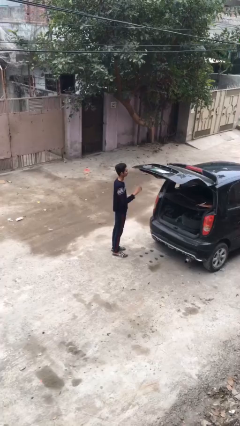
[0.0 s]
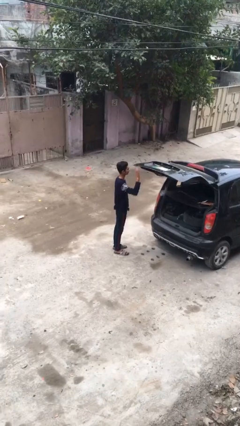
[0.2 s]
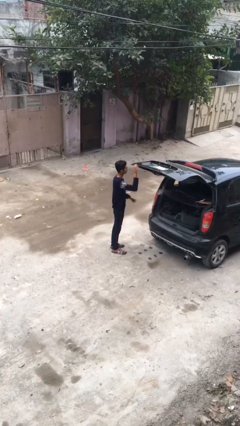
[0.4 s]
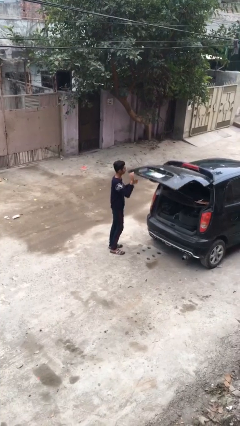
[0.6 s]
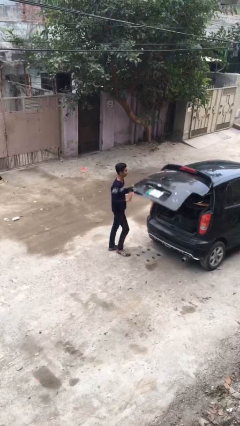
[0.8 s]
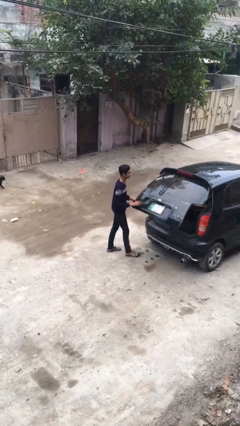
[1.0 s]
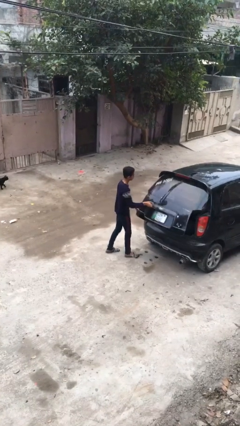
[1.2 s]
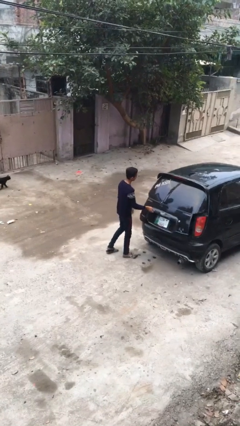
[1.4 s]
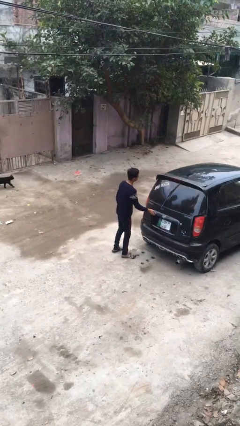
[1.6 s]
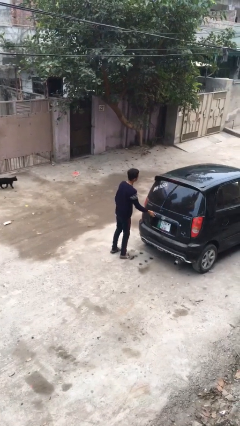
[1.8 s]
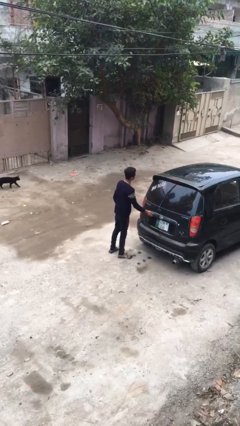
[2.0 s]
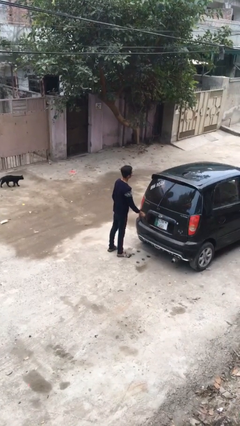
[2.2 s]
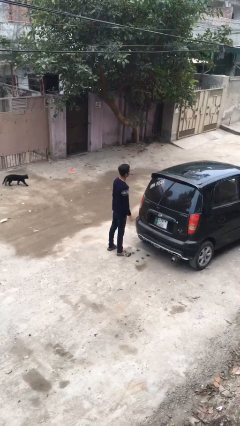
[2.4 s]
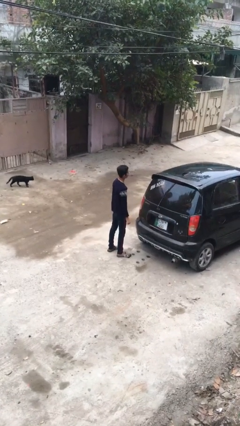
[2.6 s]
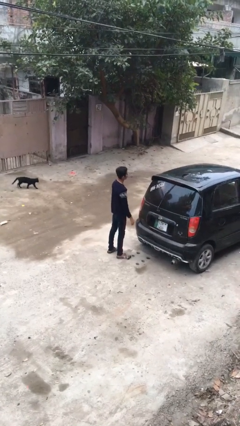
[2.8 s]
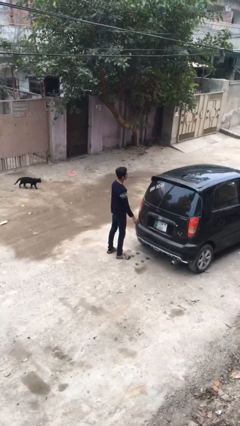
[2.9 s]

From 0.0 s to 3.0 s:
person closes car trunk

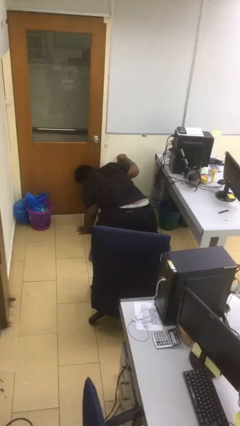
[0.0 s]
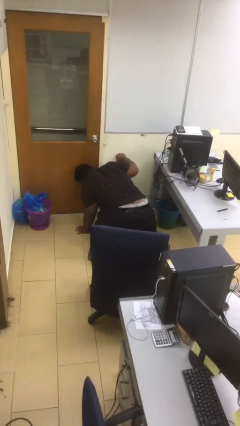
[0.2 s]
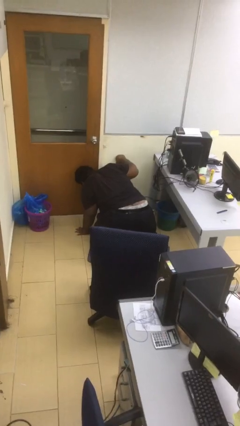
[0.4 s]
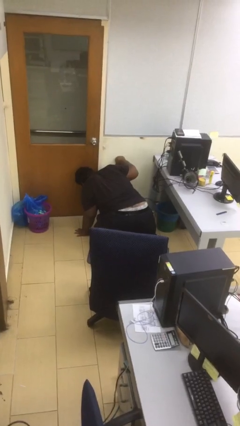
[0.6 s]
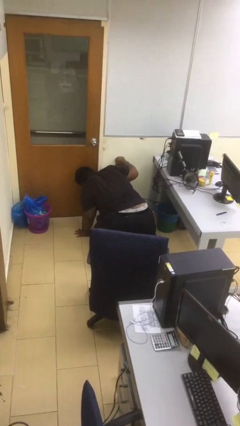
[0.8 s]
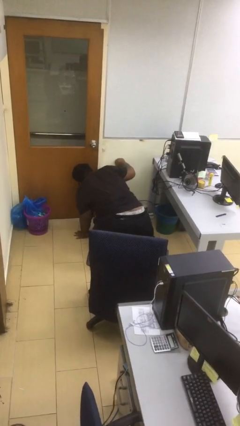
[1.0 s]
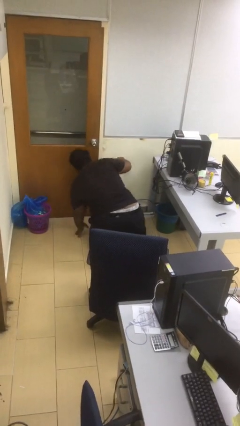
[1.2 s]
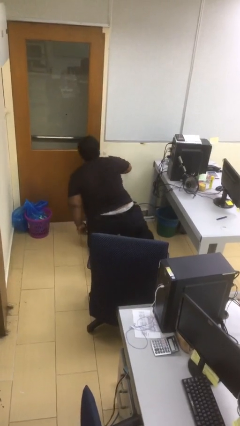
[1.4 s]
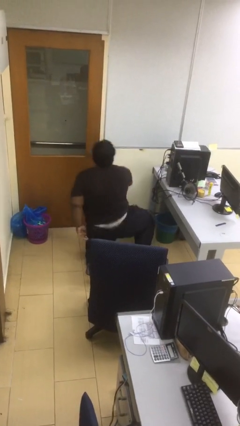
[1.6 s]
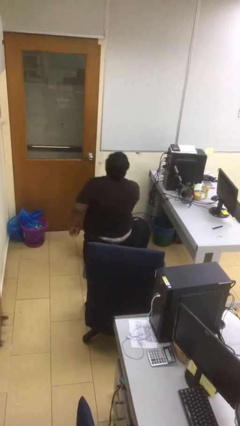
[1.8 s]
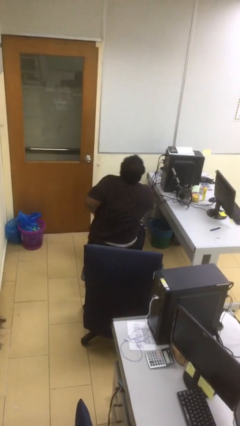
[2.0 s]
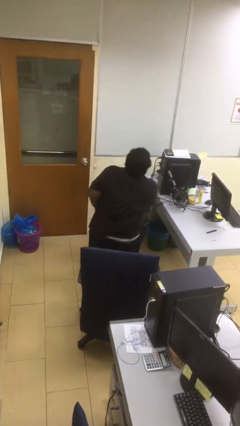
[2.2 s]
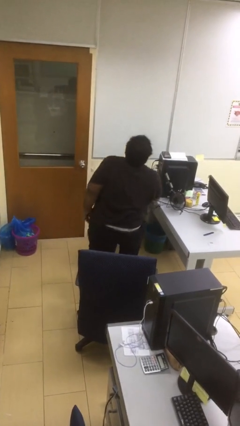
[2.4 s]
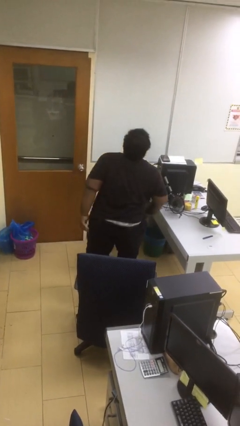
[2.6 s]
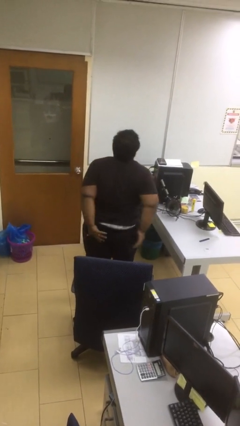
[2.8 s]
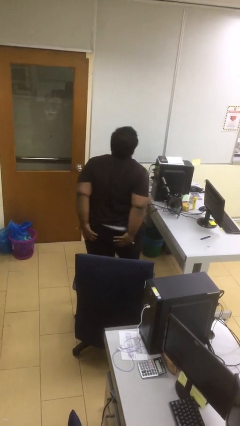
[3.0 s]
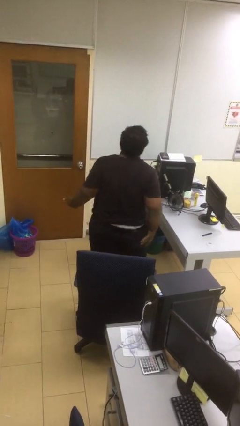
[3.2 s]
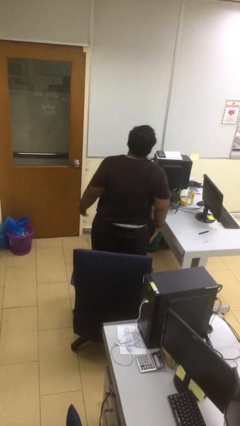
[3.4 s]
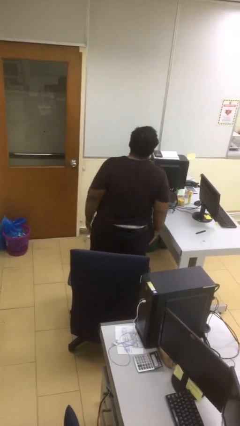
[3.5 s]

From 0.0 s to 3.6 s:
person stands up from floor

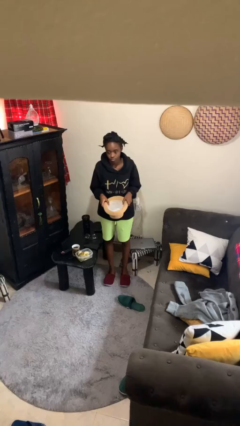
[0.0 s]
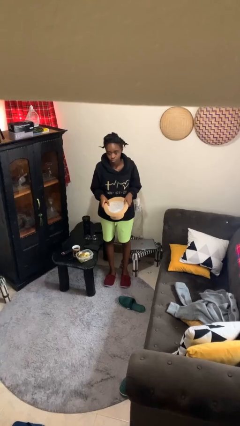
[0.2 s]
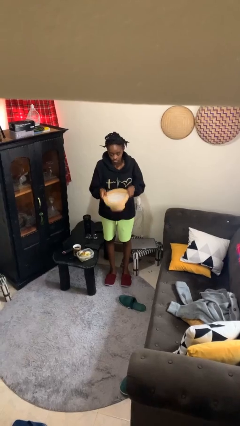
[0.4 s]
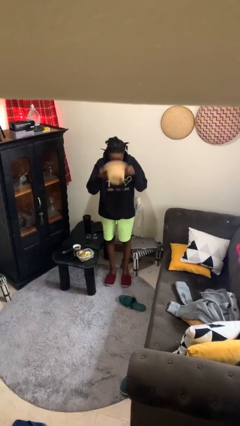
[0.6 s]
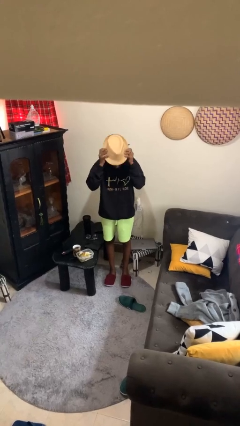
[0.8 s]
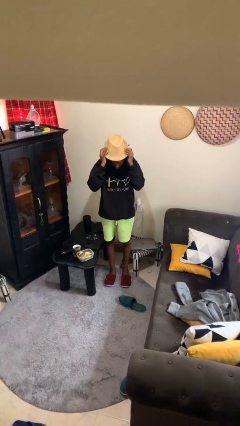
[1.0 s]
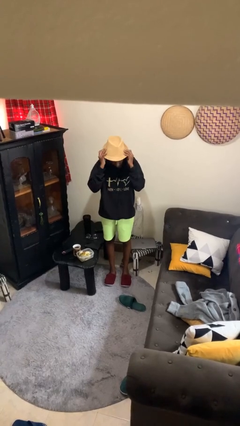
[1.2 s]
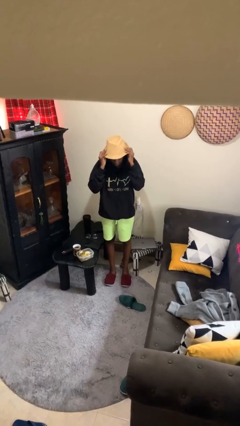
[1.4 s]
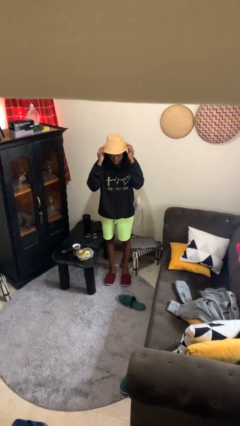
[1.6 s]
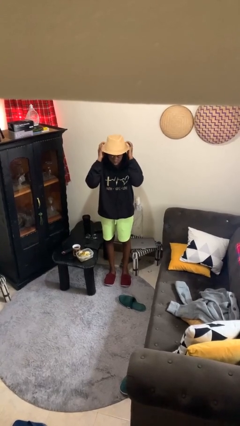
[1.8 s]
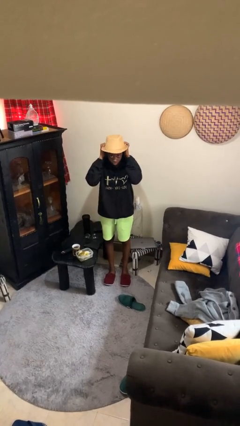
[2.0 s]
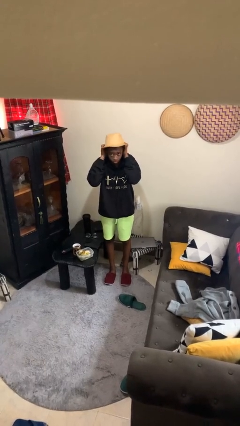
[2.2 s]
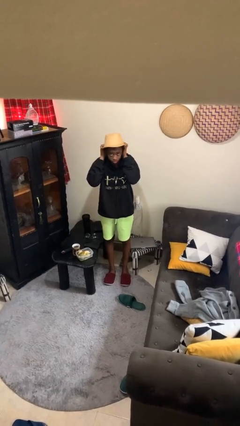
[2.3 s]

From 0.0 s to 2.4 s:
person puts on hat

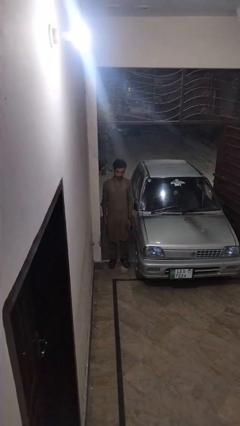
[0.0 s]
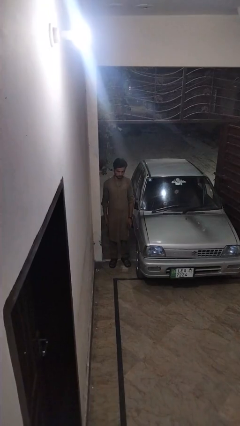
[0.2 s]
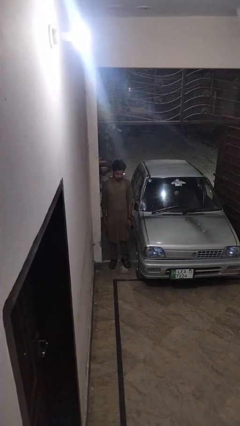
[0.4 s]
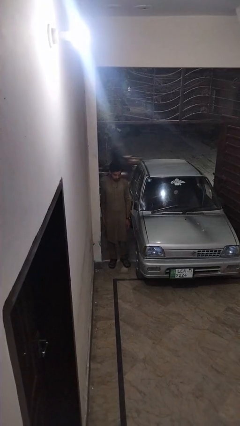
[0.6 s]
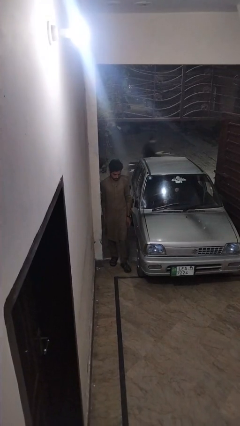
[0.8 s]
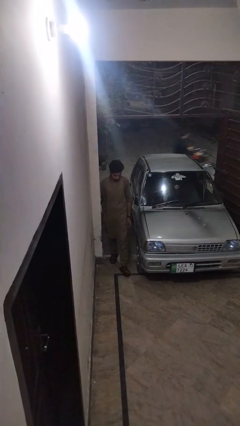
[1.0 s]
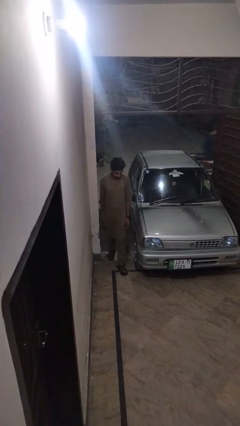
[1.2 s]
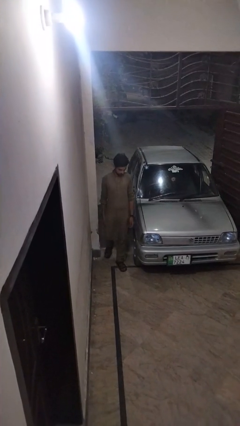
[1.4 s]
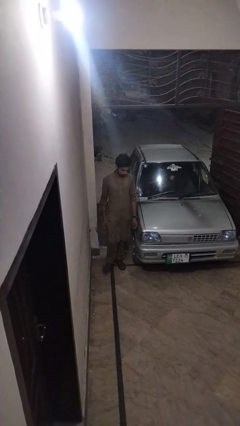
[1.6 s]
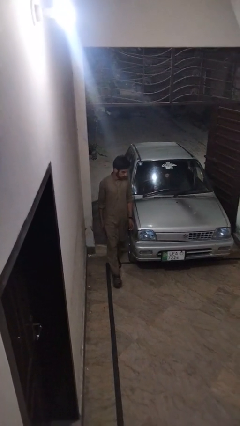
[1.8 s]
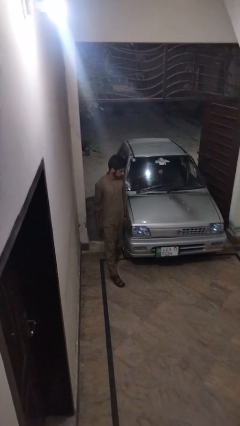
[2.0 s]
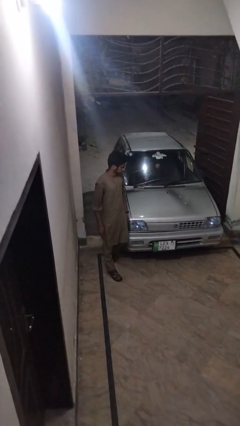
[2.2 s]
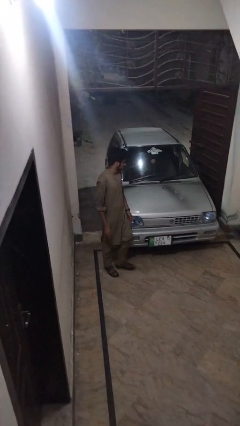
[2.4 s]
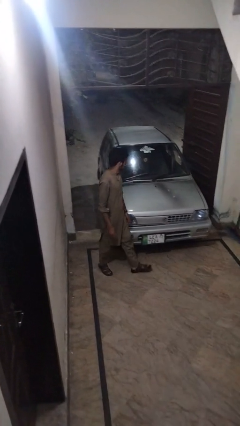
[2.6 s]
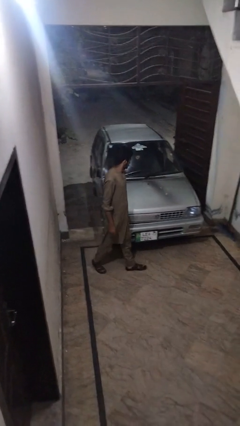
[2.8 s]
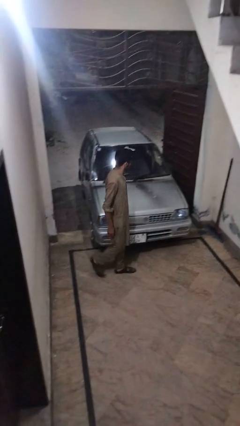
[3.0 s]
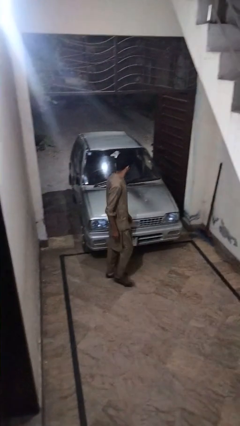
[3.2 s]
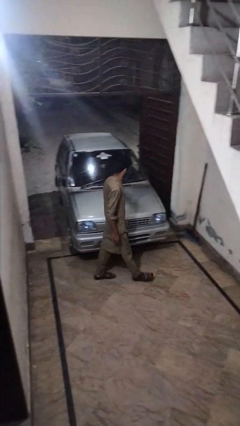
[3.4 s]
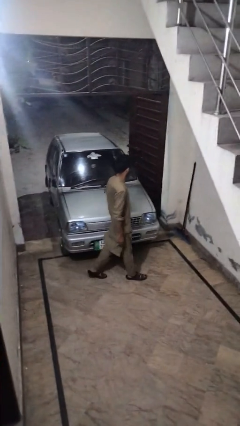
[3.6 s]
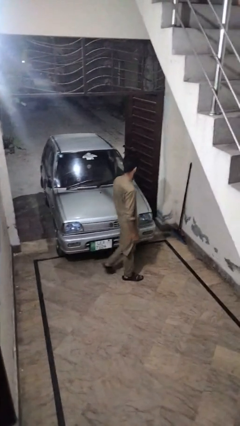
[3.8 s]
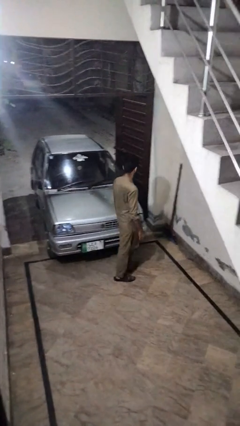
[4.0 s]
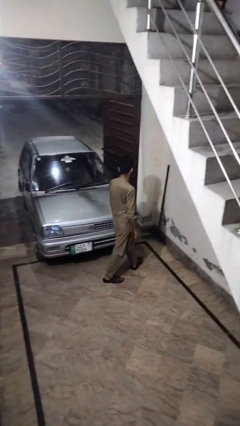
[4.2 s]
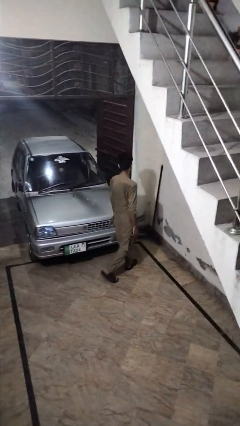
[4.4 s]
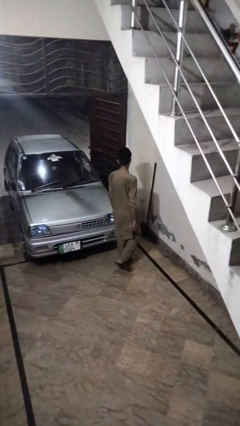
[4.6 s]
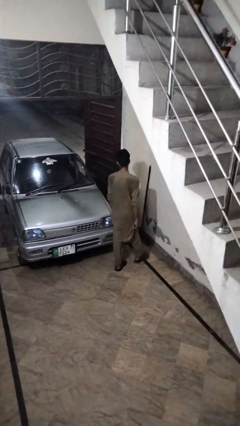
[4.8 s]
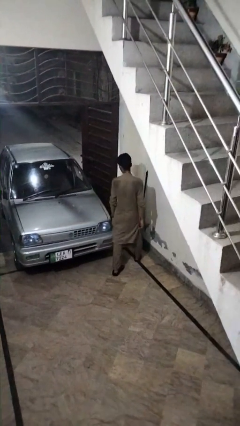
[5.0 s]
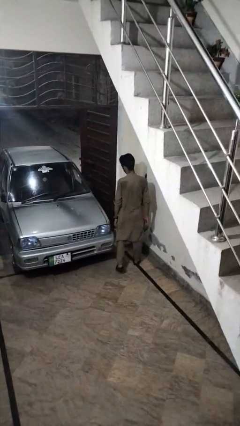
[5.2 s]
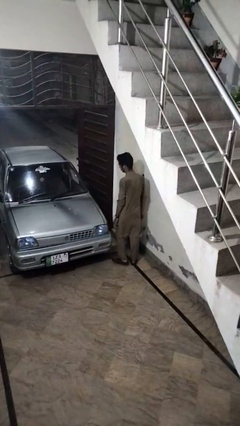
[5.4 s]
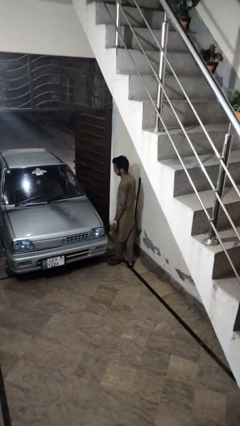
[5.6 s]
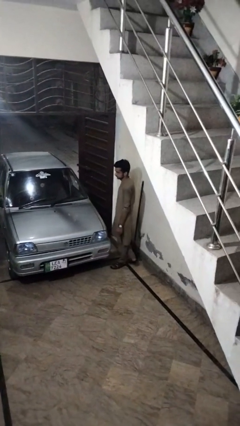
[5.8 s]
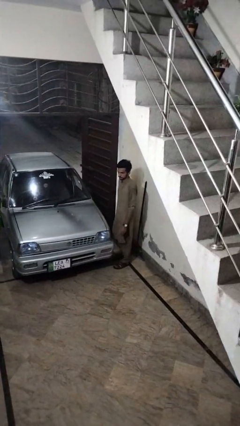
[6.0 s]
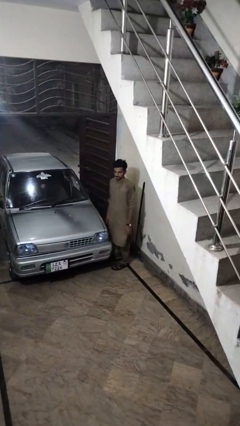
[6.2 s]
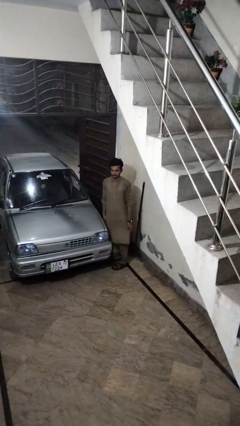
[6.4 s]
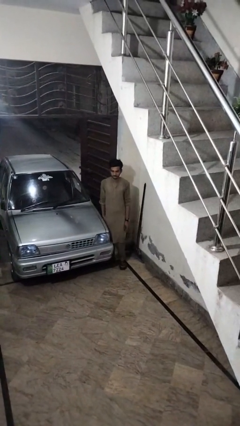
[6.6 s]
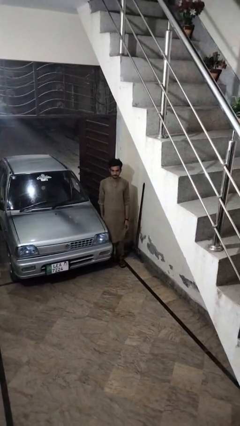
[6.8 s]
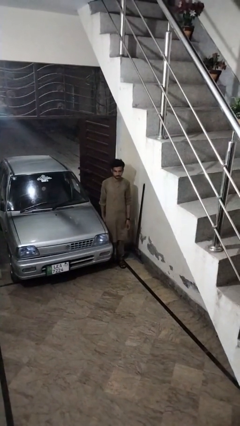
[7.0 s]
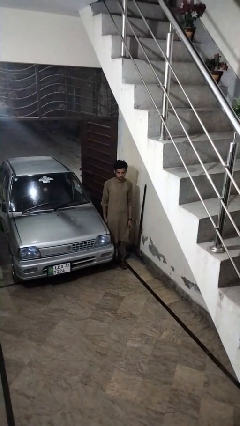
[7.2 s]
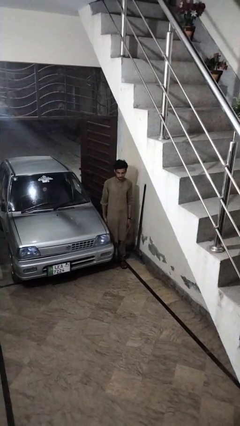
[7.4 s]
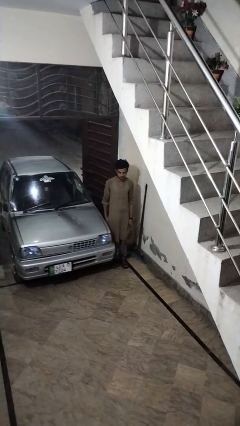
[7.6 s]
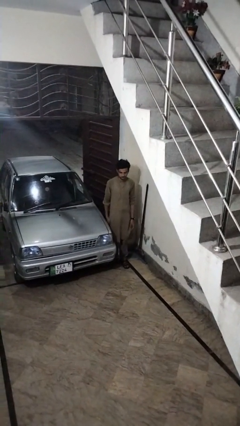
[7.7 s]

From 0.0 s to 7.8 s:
person walks around car

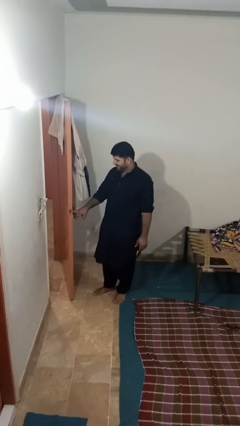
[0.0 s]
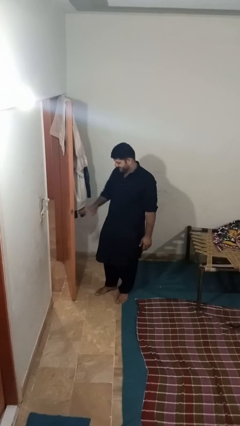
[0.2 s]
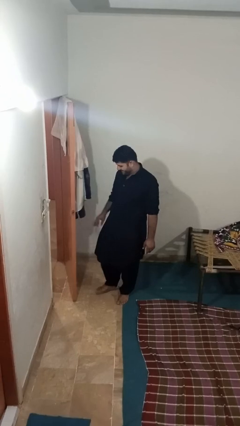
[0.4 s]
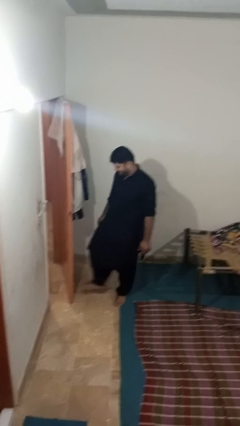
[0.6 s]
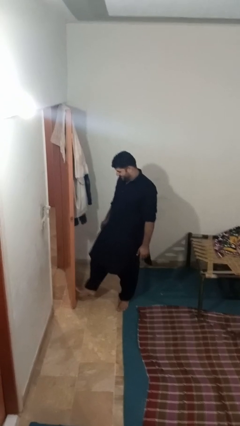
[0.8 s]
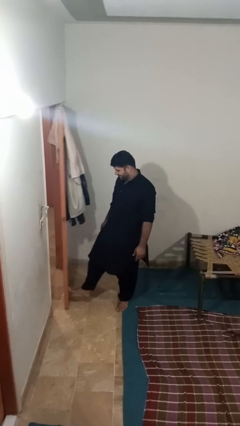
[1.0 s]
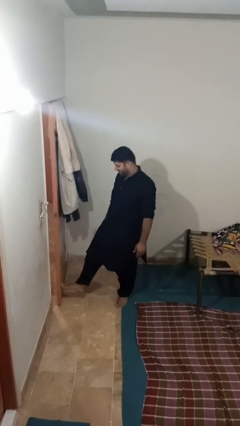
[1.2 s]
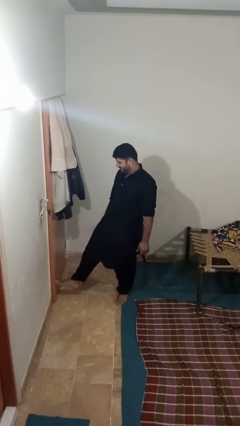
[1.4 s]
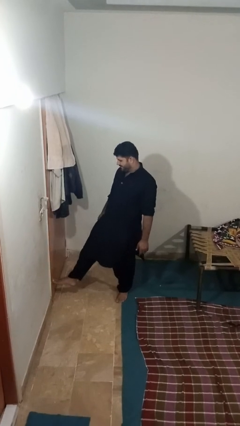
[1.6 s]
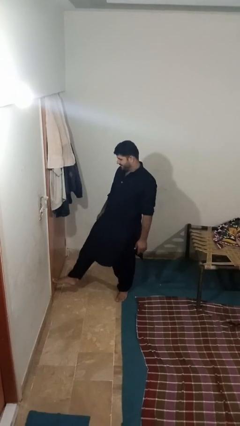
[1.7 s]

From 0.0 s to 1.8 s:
person closes door with foot
